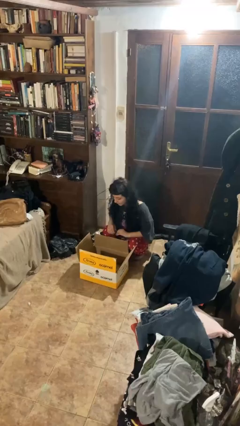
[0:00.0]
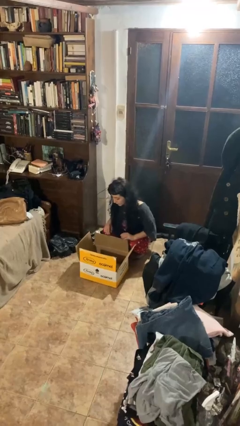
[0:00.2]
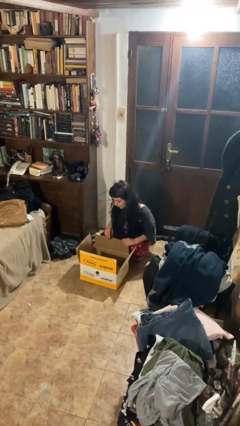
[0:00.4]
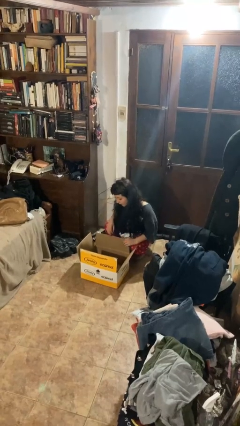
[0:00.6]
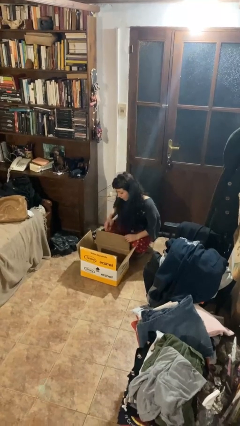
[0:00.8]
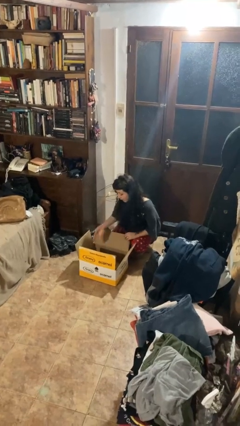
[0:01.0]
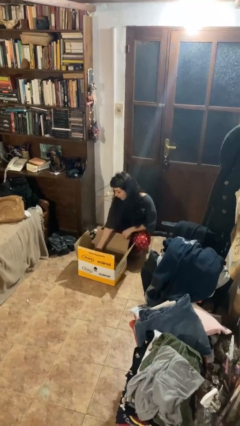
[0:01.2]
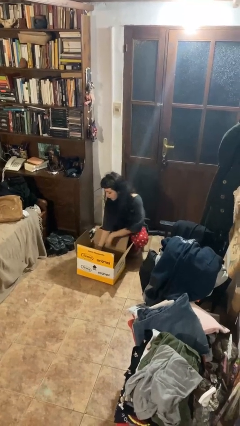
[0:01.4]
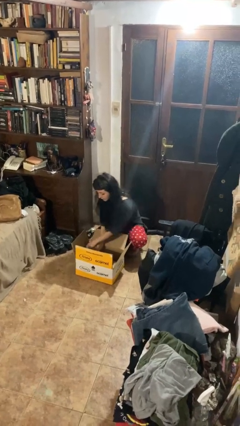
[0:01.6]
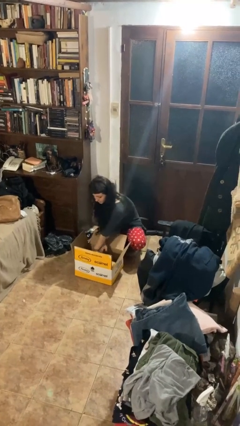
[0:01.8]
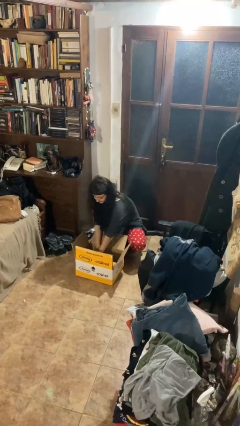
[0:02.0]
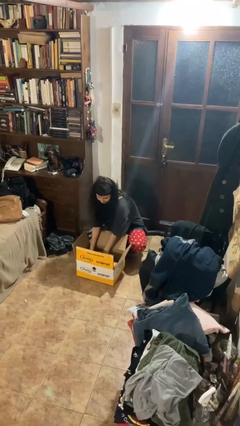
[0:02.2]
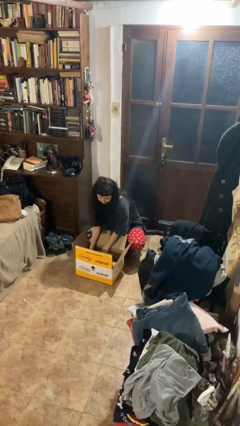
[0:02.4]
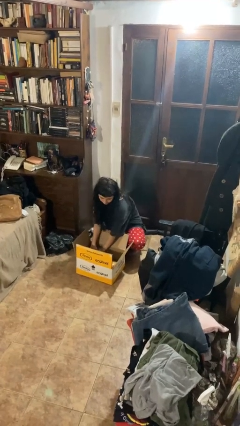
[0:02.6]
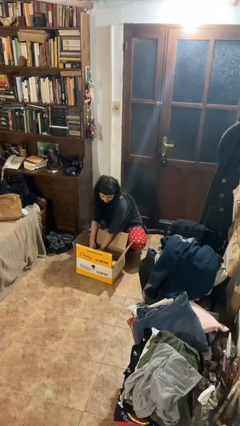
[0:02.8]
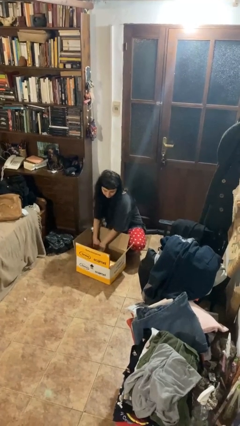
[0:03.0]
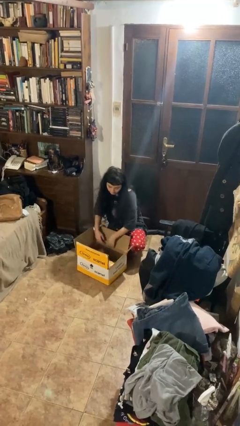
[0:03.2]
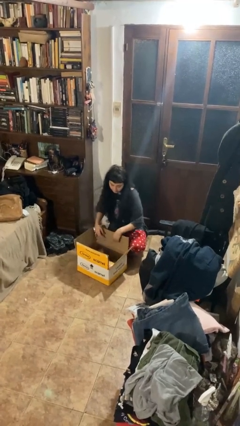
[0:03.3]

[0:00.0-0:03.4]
person searches in box

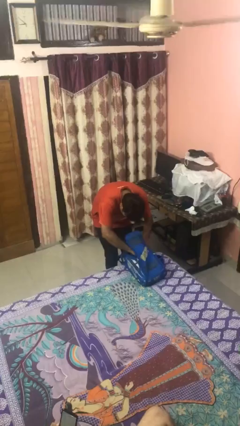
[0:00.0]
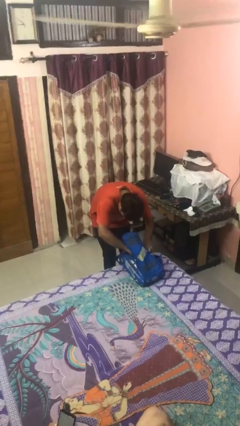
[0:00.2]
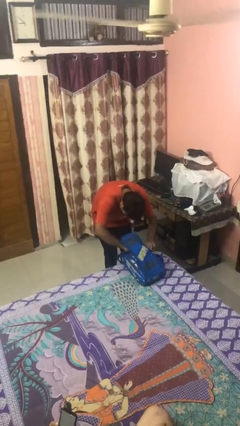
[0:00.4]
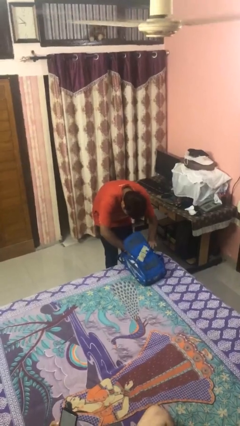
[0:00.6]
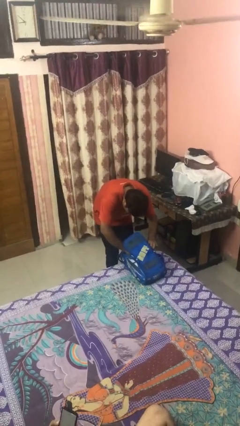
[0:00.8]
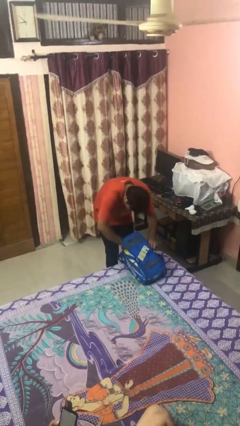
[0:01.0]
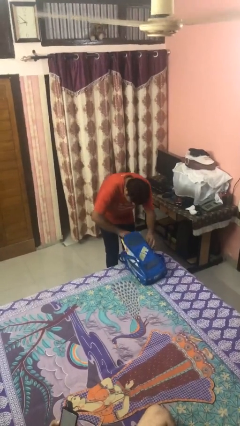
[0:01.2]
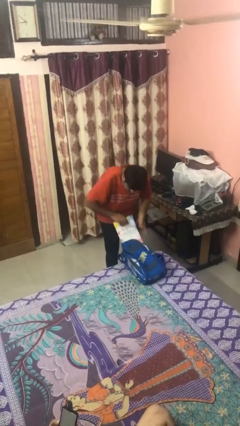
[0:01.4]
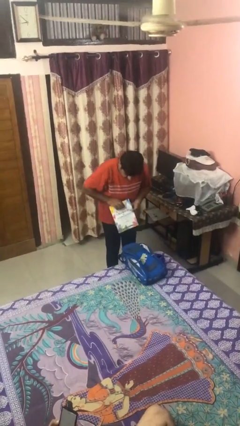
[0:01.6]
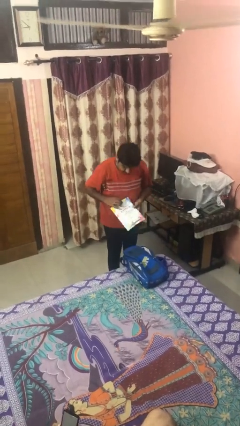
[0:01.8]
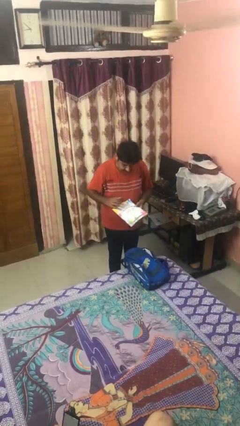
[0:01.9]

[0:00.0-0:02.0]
person takes object from backpack

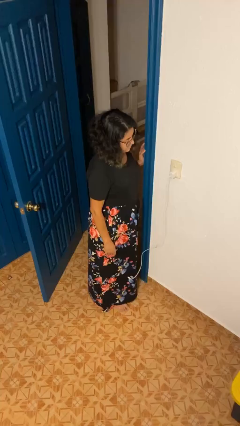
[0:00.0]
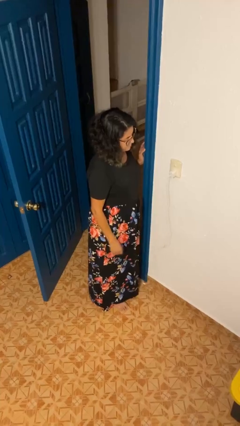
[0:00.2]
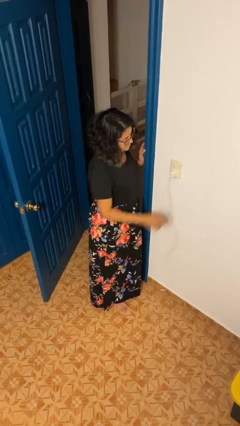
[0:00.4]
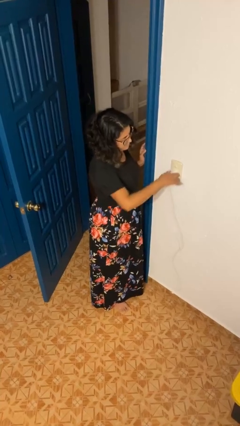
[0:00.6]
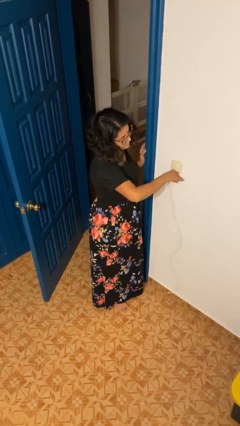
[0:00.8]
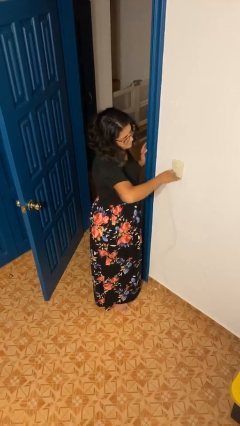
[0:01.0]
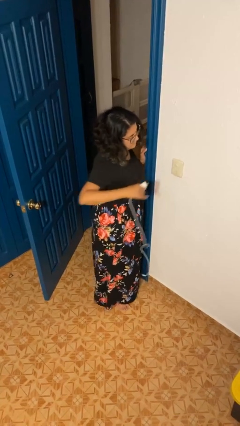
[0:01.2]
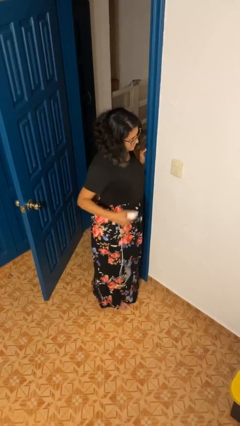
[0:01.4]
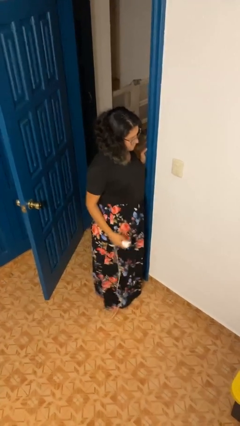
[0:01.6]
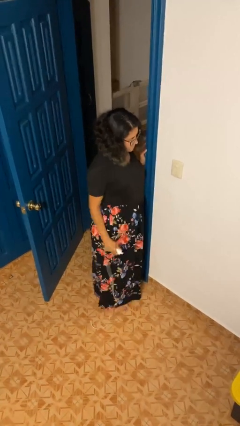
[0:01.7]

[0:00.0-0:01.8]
person unplugs from electrical socket

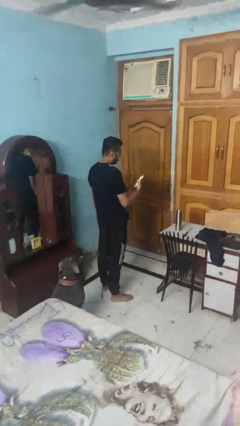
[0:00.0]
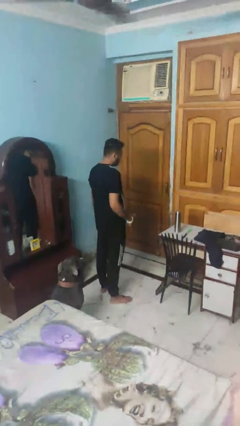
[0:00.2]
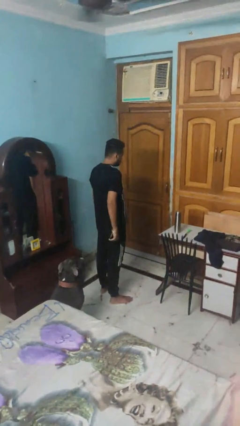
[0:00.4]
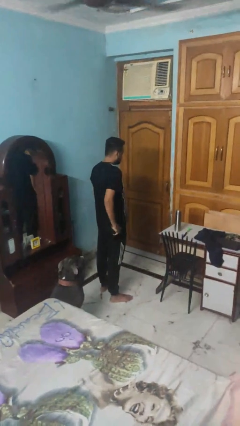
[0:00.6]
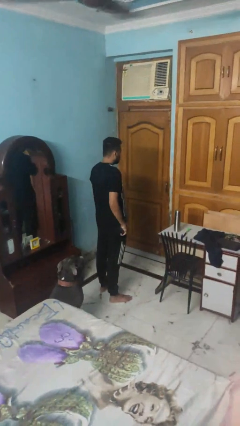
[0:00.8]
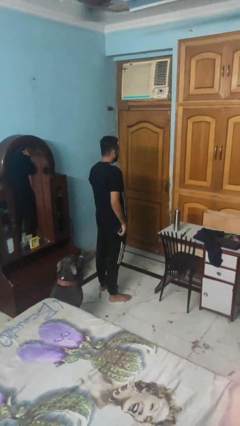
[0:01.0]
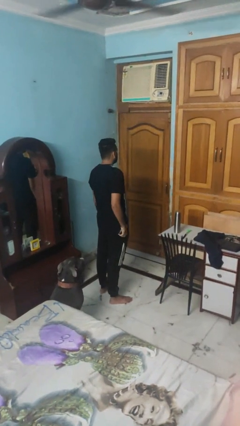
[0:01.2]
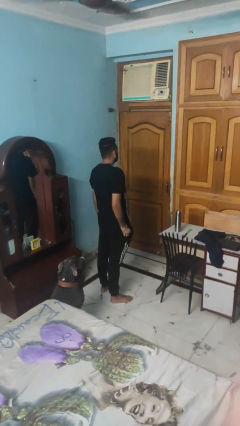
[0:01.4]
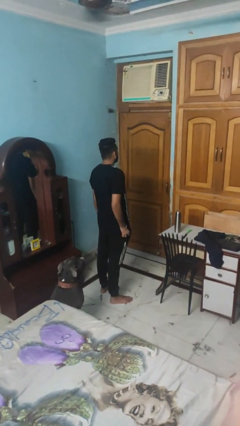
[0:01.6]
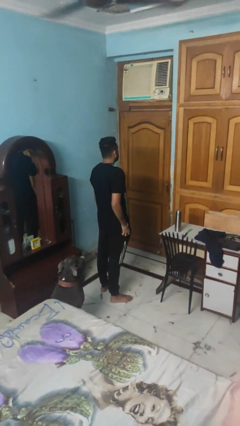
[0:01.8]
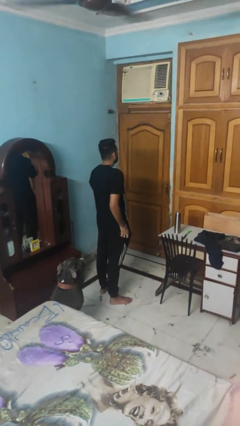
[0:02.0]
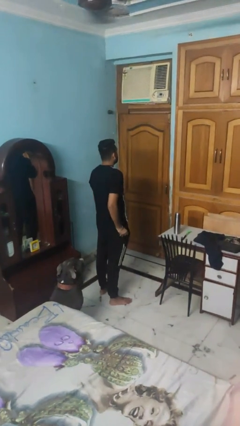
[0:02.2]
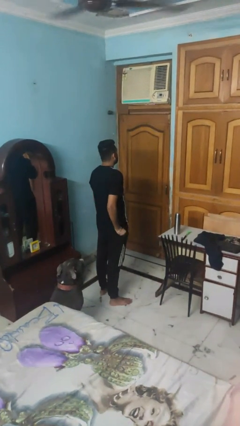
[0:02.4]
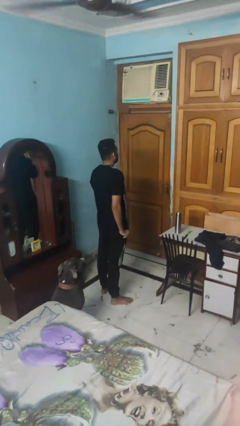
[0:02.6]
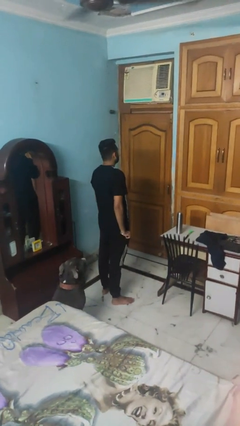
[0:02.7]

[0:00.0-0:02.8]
person puts phone into pocket

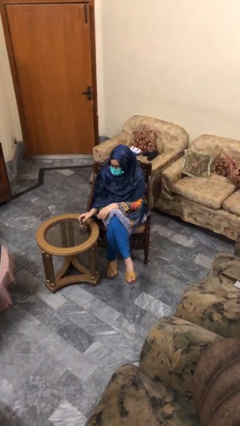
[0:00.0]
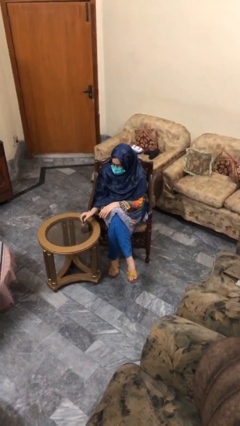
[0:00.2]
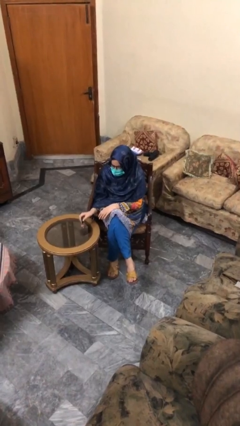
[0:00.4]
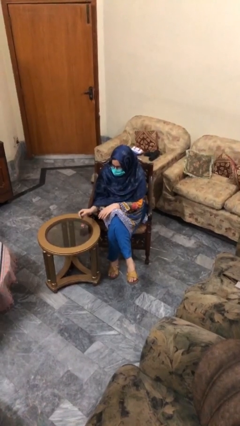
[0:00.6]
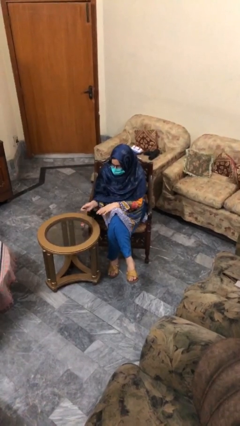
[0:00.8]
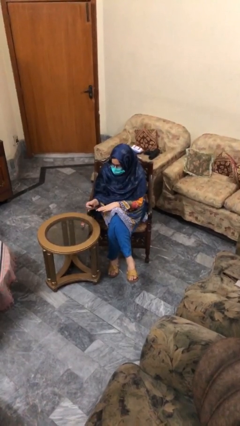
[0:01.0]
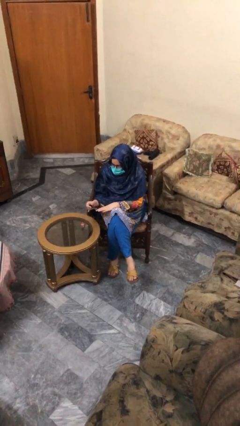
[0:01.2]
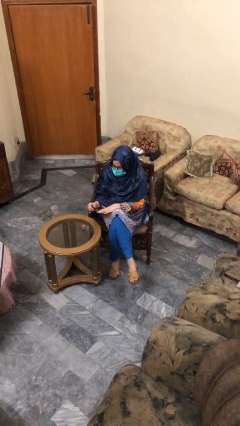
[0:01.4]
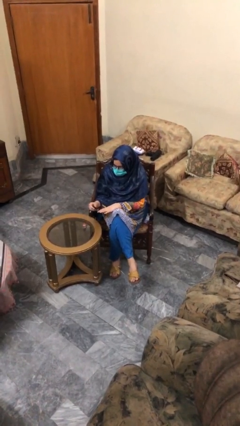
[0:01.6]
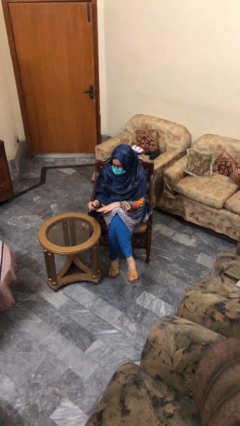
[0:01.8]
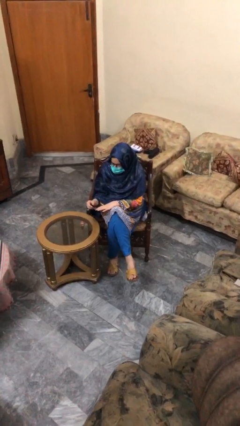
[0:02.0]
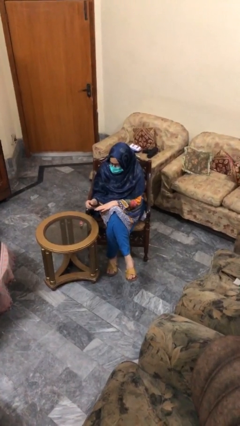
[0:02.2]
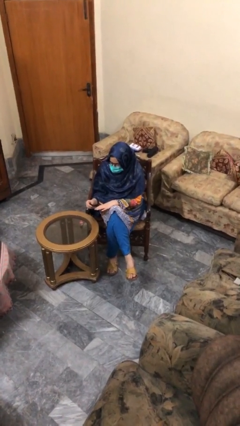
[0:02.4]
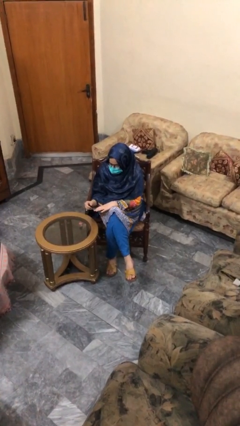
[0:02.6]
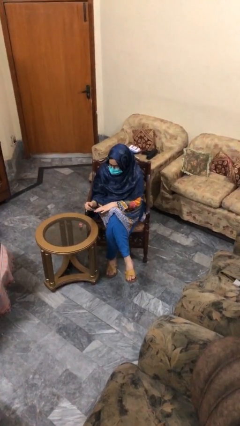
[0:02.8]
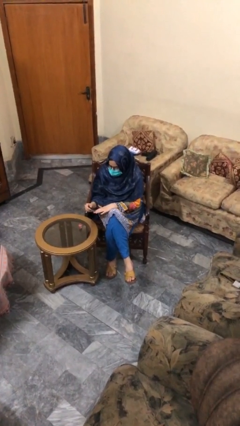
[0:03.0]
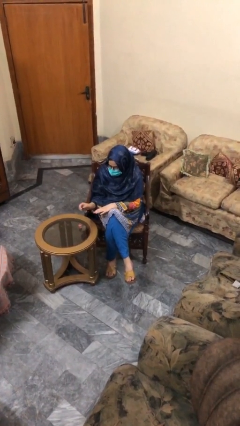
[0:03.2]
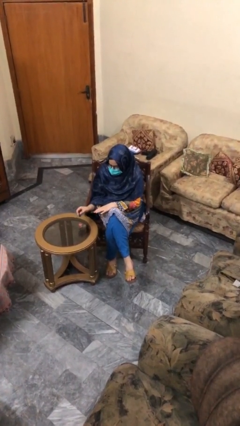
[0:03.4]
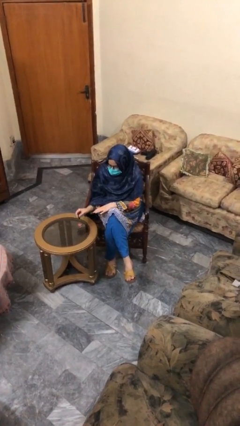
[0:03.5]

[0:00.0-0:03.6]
person paints fingernails

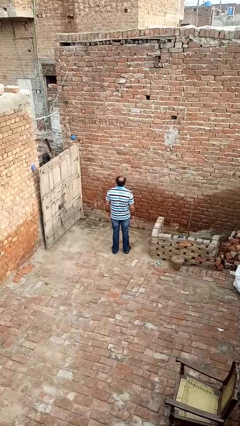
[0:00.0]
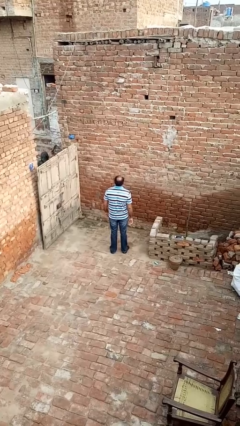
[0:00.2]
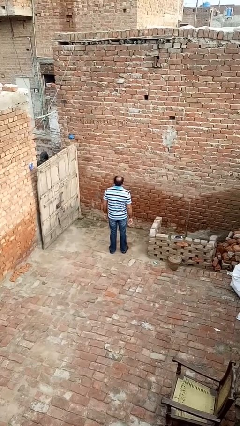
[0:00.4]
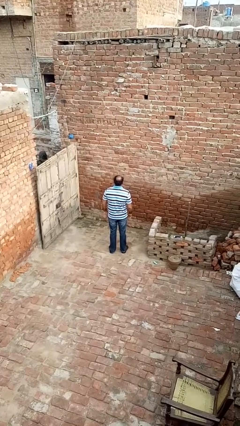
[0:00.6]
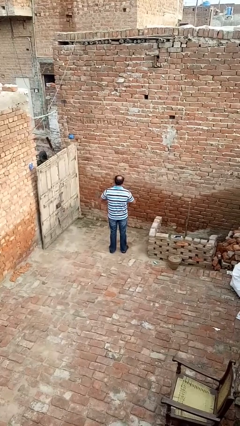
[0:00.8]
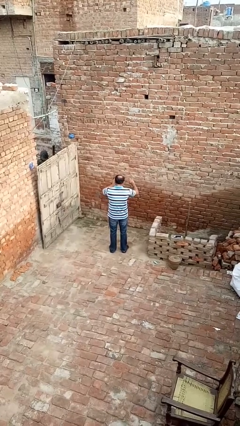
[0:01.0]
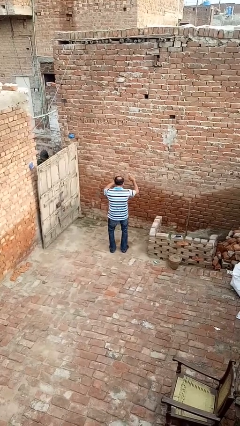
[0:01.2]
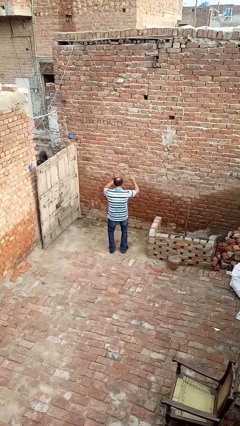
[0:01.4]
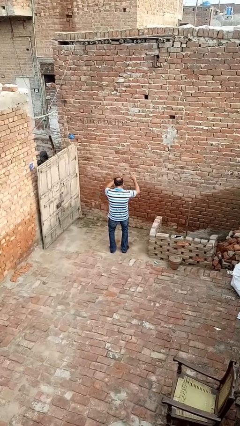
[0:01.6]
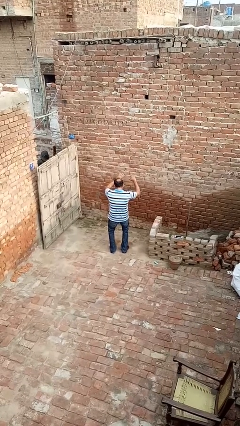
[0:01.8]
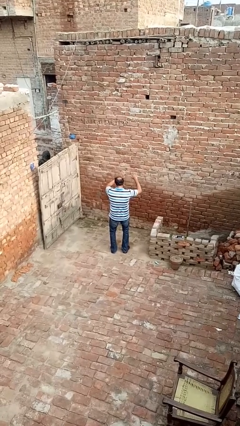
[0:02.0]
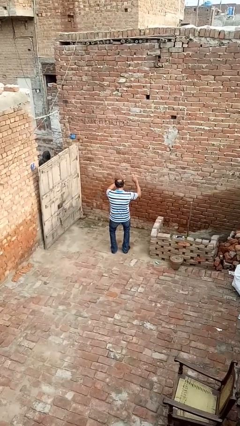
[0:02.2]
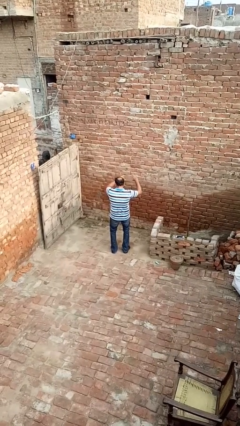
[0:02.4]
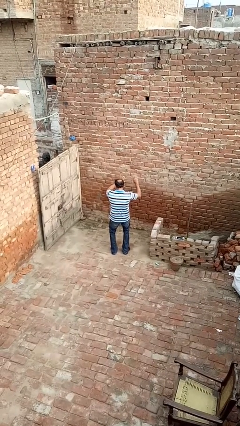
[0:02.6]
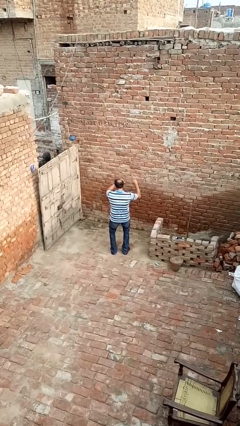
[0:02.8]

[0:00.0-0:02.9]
person dances in place

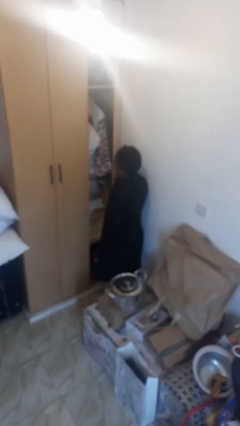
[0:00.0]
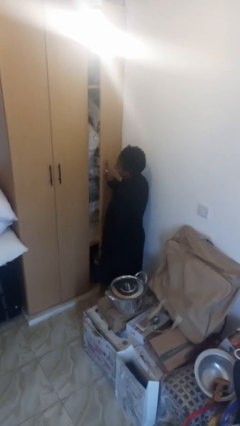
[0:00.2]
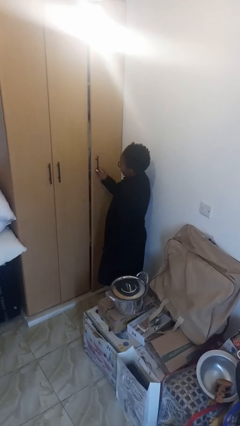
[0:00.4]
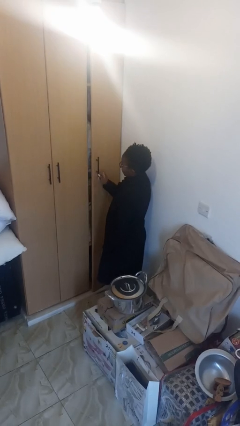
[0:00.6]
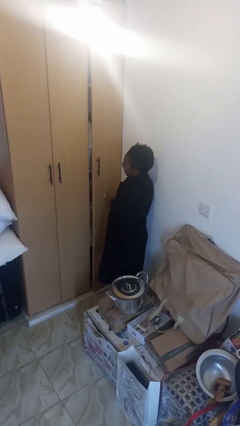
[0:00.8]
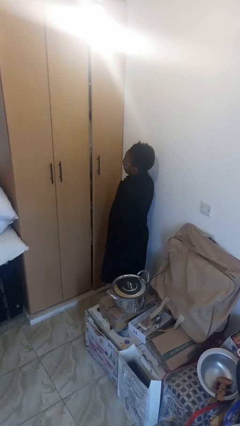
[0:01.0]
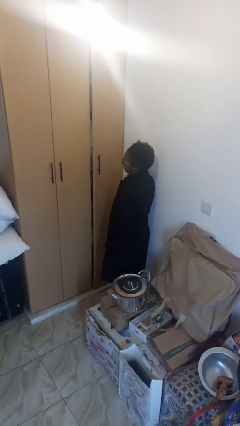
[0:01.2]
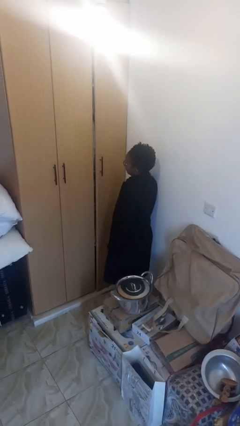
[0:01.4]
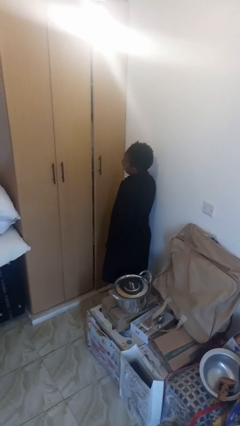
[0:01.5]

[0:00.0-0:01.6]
person closes closet door
